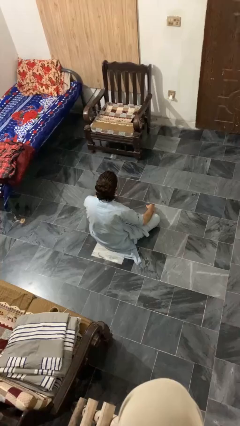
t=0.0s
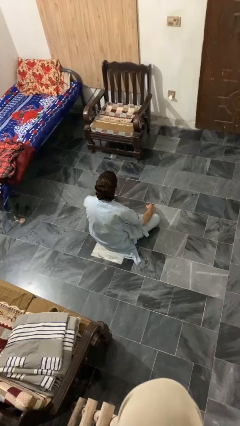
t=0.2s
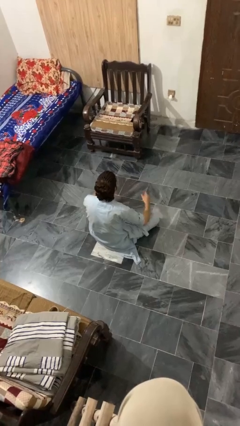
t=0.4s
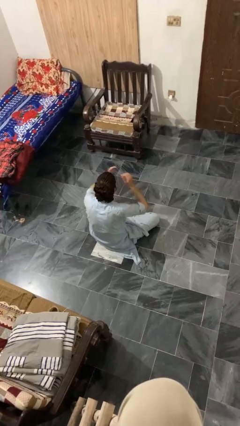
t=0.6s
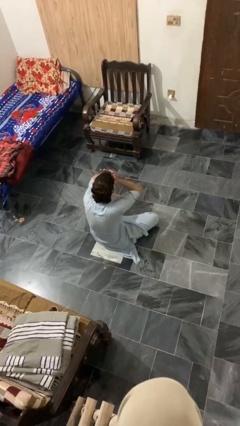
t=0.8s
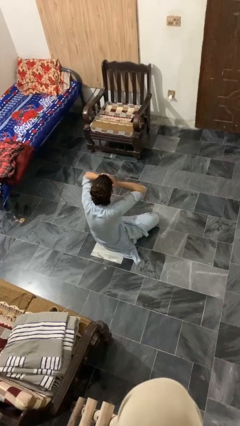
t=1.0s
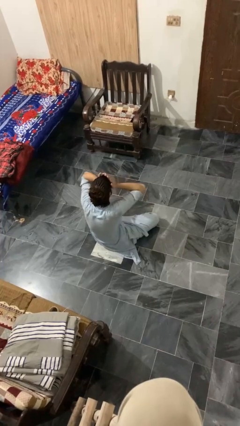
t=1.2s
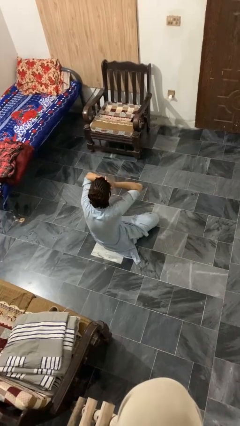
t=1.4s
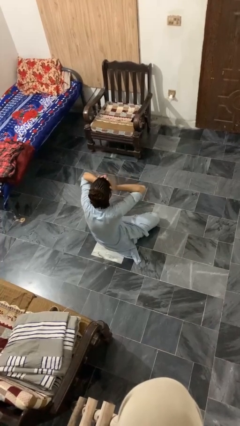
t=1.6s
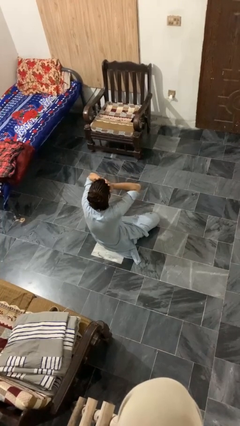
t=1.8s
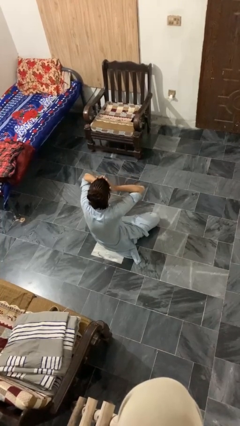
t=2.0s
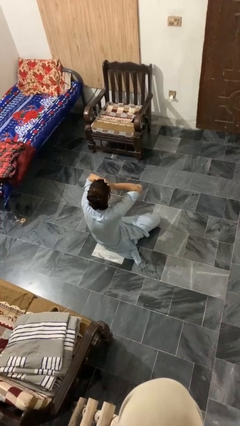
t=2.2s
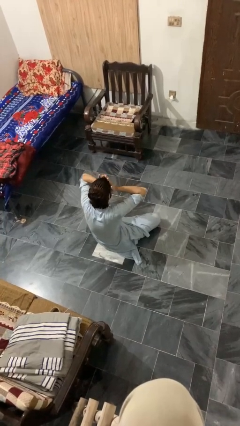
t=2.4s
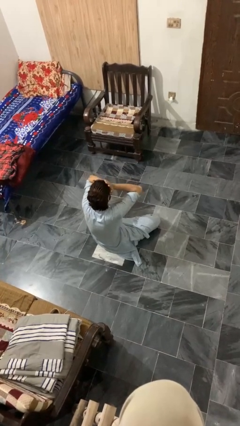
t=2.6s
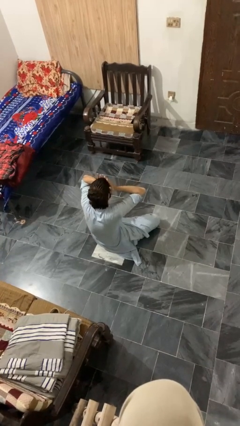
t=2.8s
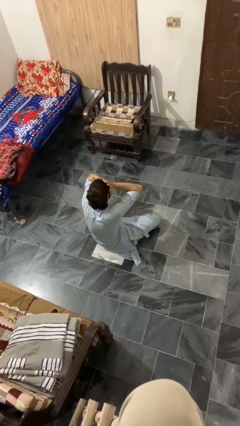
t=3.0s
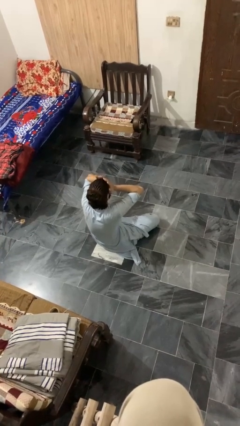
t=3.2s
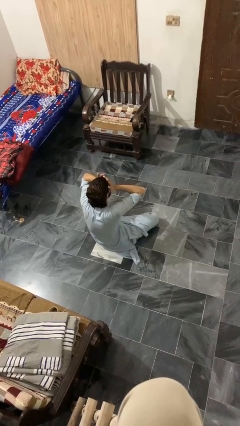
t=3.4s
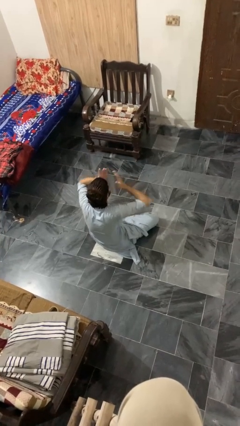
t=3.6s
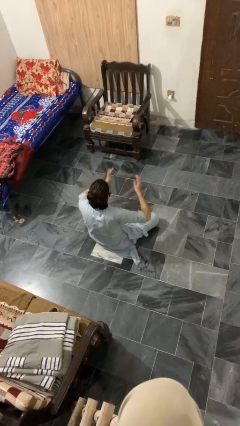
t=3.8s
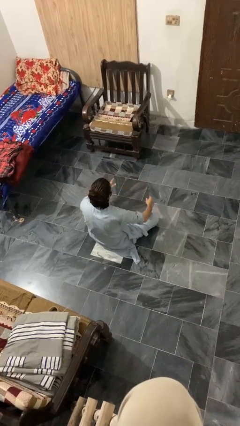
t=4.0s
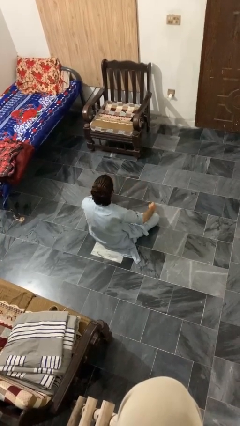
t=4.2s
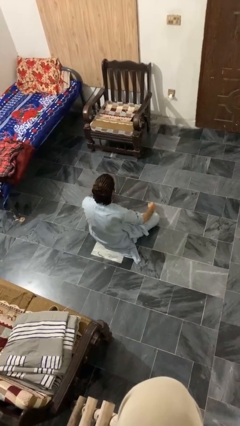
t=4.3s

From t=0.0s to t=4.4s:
person rubs eyes

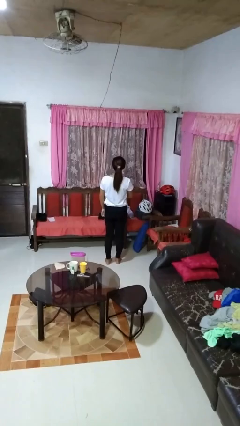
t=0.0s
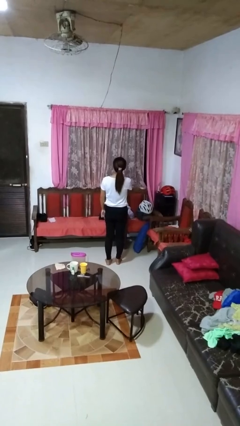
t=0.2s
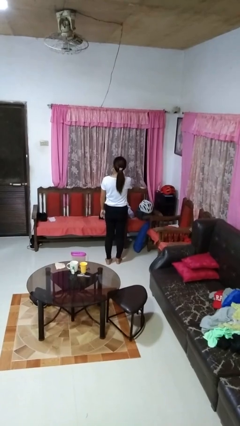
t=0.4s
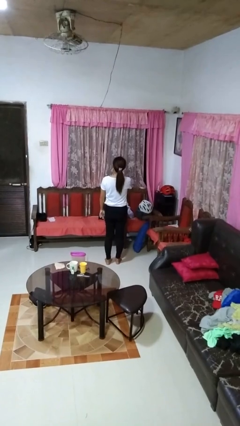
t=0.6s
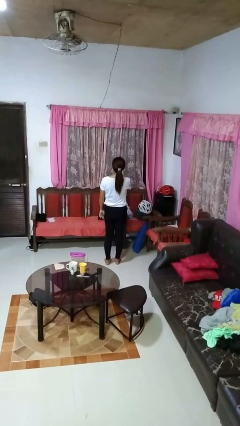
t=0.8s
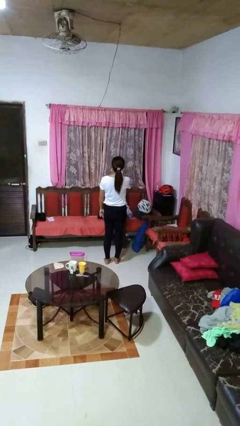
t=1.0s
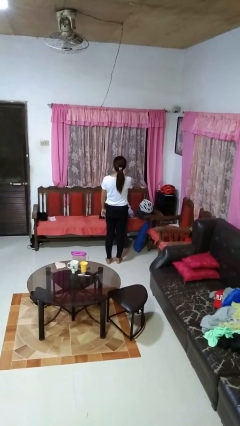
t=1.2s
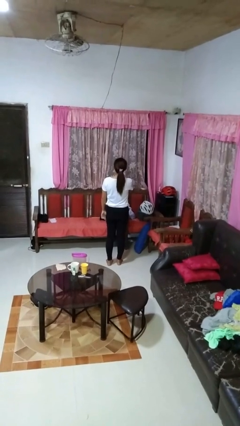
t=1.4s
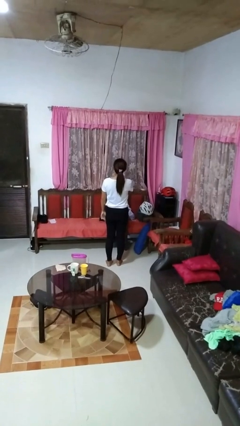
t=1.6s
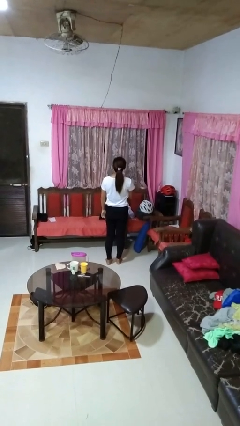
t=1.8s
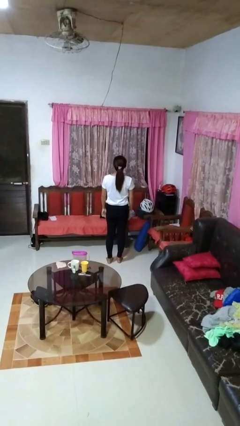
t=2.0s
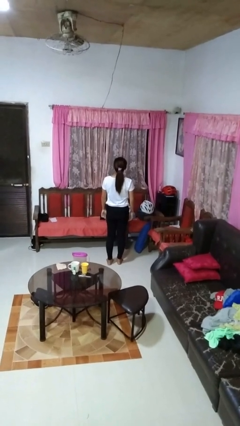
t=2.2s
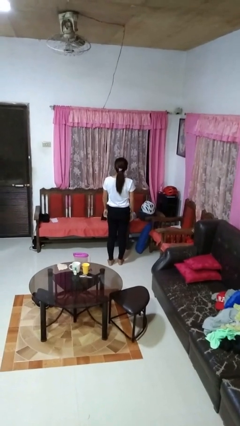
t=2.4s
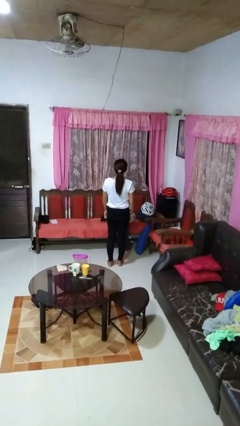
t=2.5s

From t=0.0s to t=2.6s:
person gestures be quiet

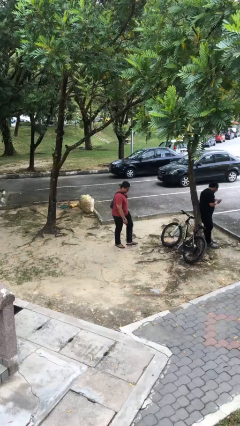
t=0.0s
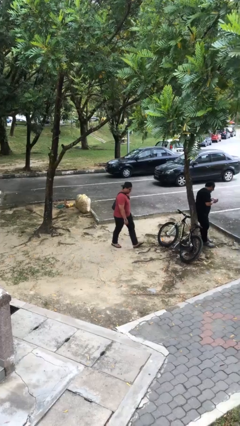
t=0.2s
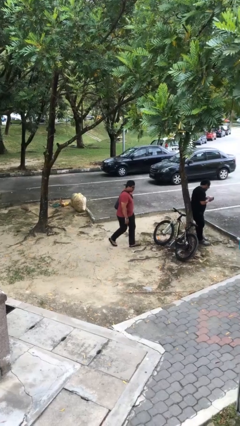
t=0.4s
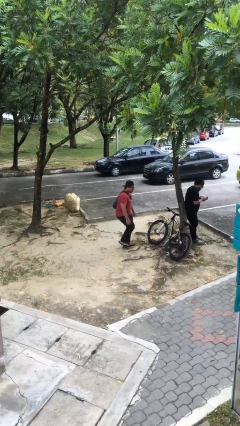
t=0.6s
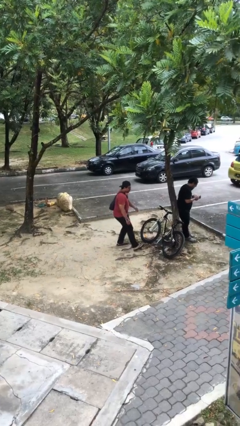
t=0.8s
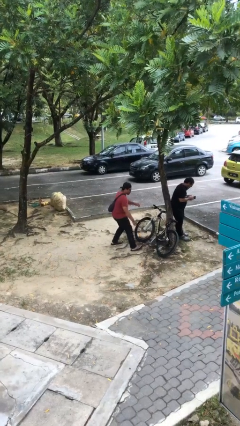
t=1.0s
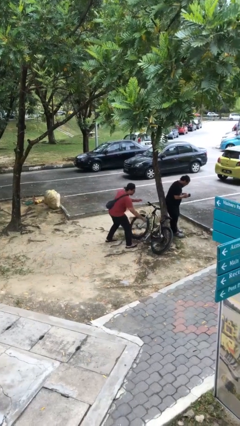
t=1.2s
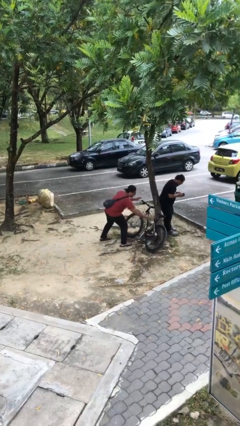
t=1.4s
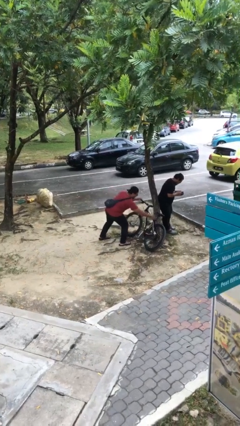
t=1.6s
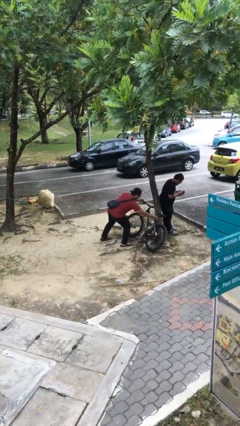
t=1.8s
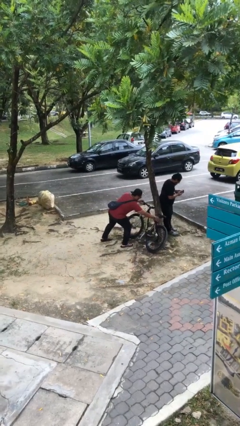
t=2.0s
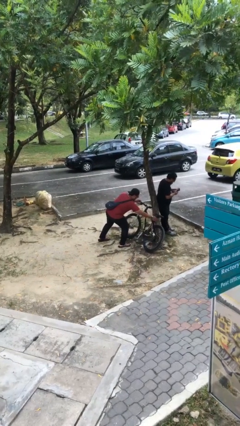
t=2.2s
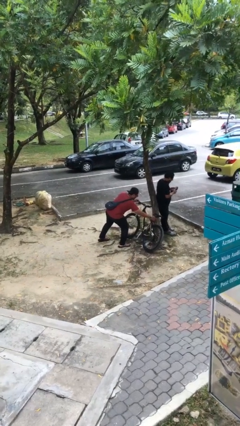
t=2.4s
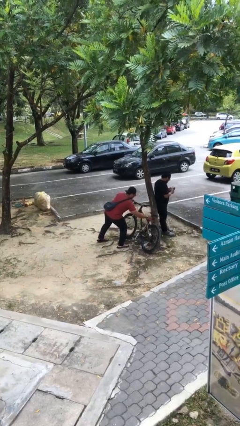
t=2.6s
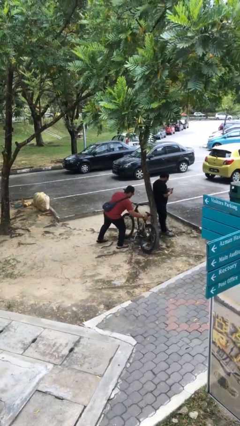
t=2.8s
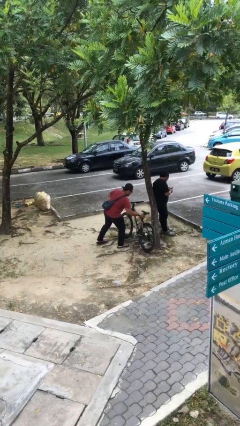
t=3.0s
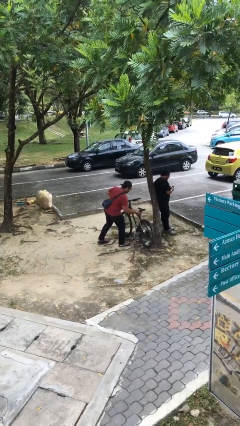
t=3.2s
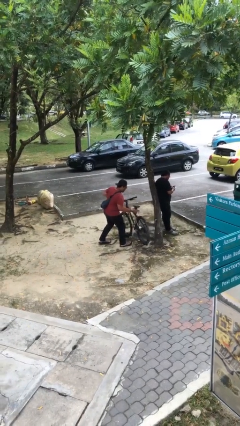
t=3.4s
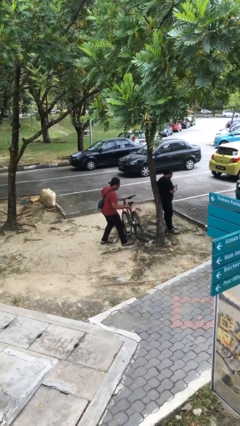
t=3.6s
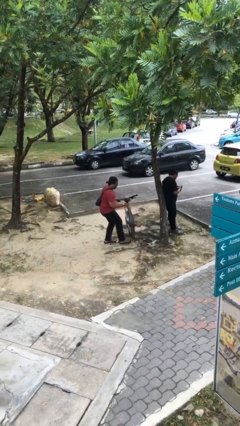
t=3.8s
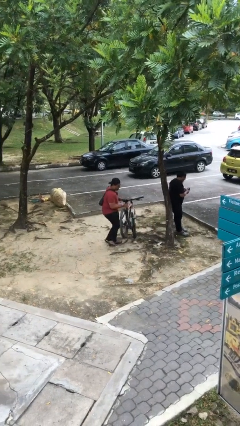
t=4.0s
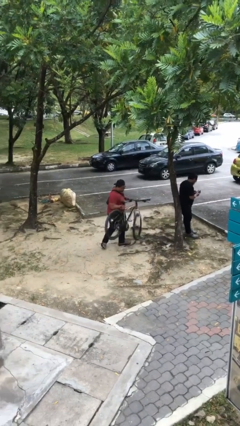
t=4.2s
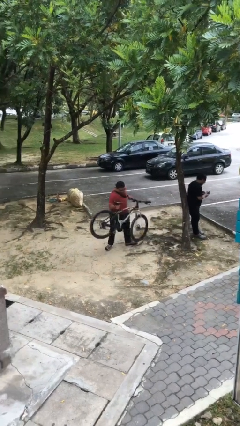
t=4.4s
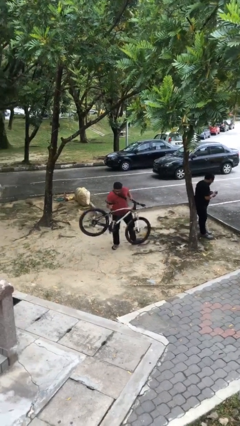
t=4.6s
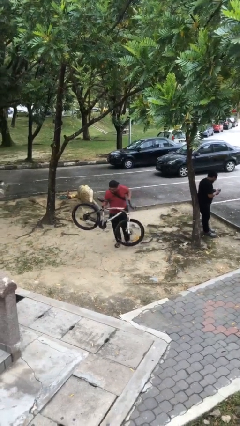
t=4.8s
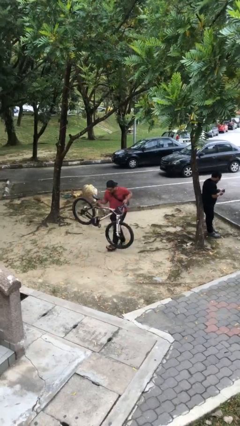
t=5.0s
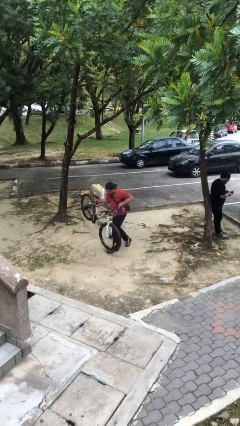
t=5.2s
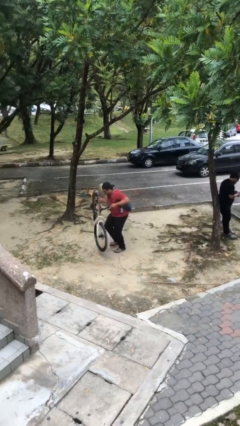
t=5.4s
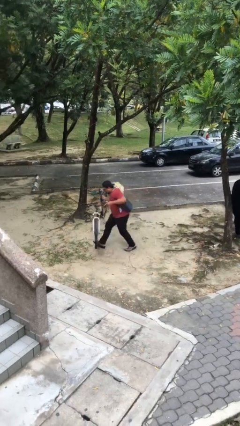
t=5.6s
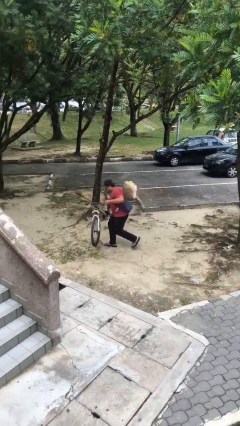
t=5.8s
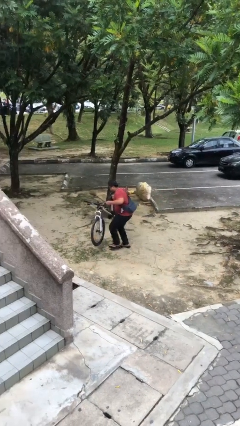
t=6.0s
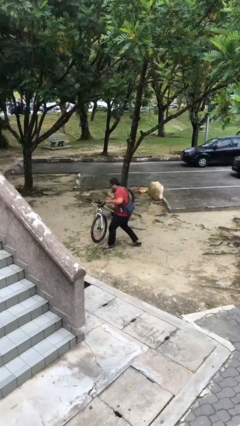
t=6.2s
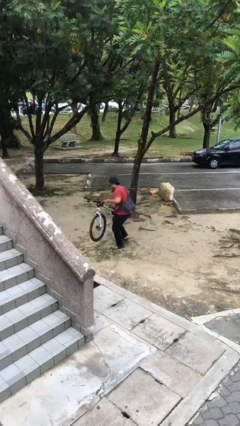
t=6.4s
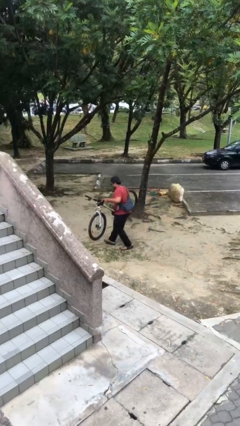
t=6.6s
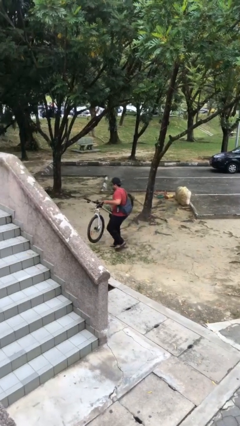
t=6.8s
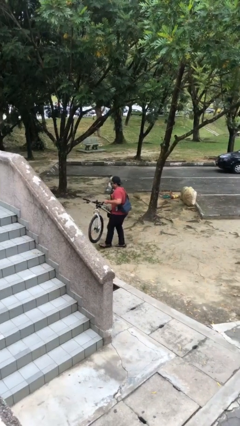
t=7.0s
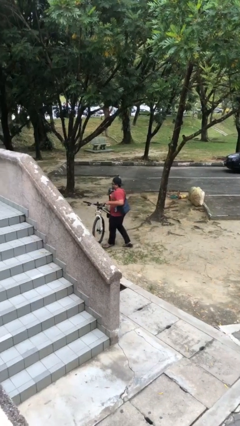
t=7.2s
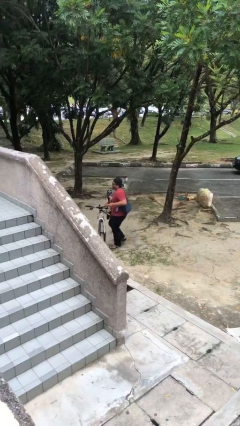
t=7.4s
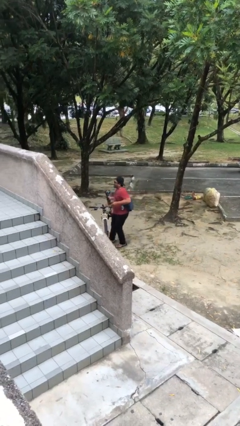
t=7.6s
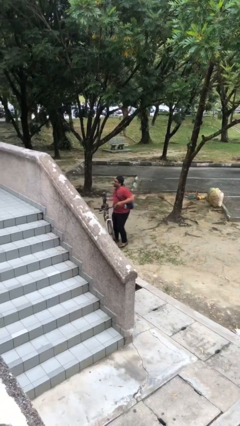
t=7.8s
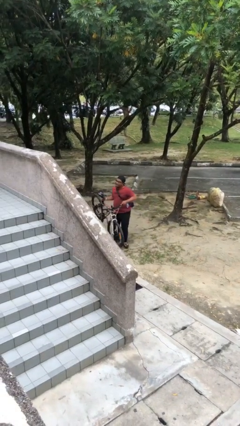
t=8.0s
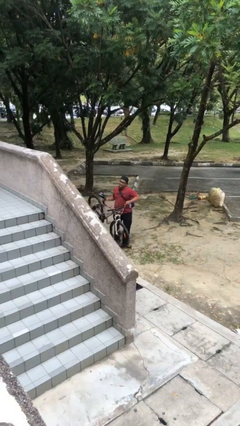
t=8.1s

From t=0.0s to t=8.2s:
person steals object from person

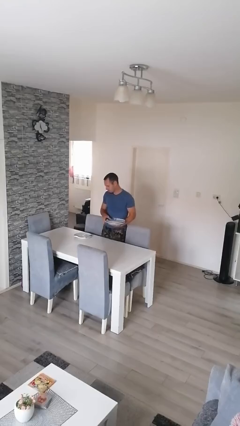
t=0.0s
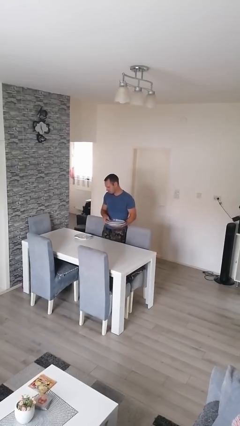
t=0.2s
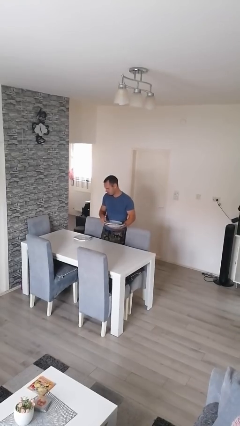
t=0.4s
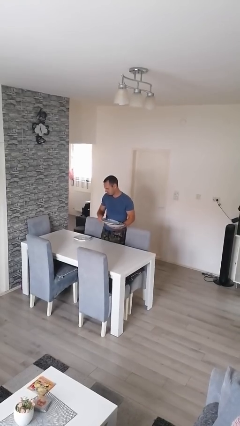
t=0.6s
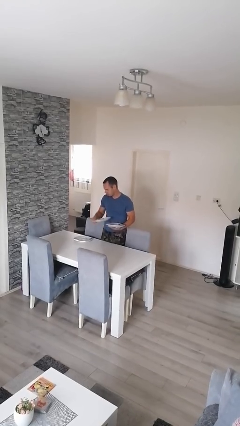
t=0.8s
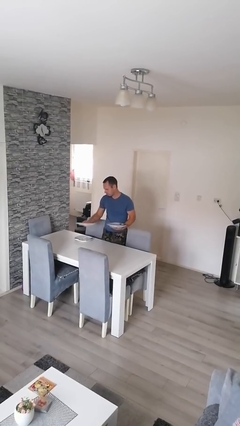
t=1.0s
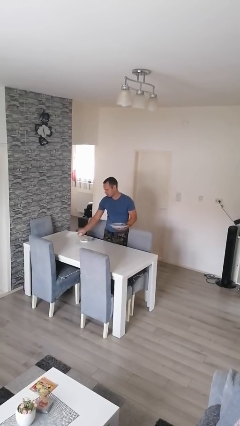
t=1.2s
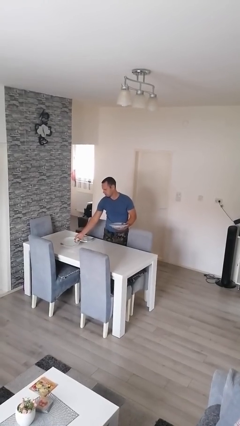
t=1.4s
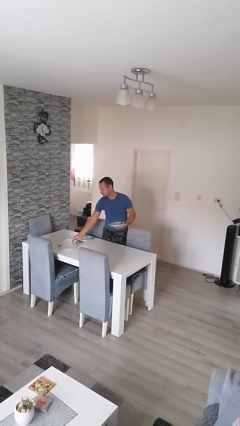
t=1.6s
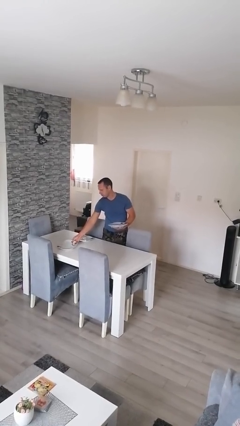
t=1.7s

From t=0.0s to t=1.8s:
person sets table

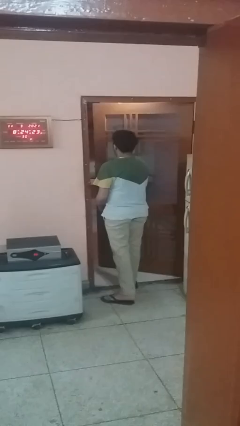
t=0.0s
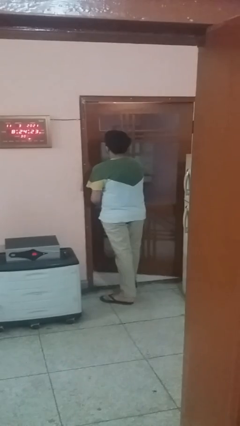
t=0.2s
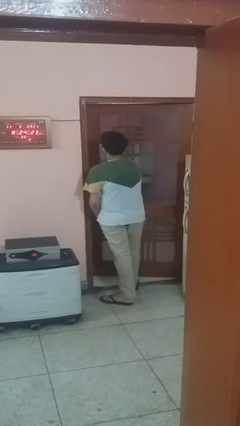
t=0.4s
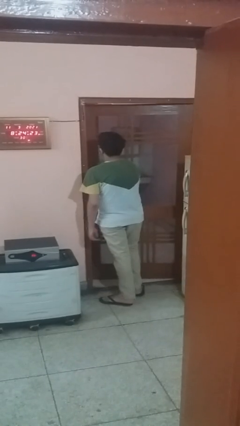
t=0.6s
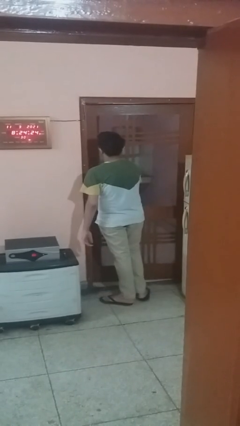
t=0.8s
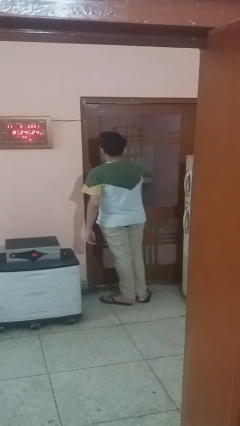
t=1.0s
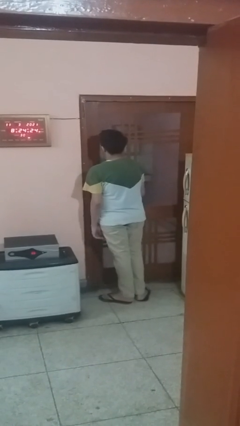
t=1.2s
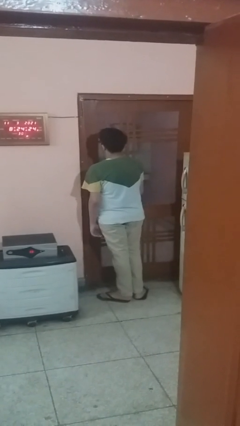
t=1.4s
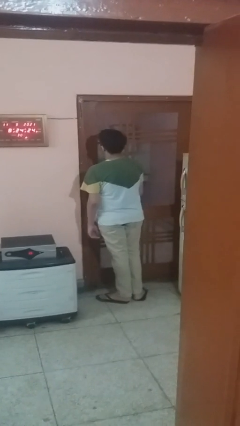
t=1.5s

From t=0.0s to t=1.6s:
person closes facility door
